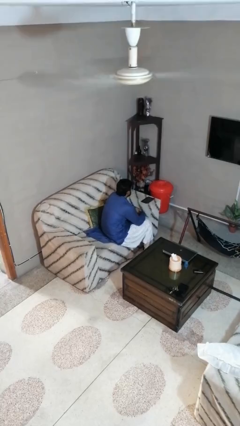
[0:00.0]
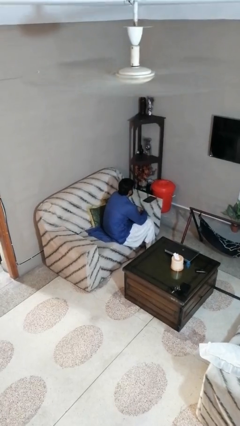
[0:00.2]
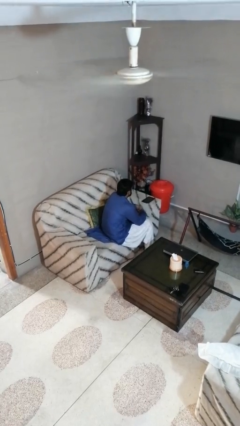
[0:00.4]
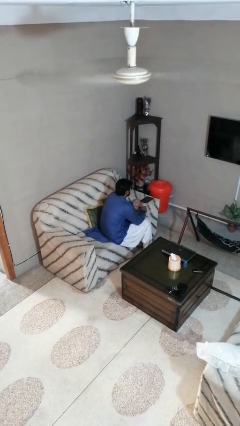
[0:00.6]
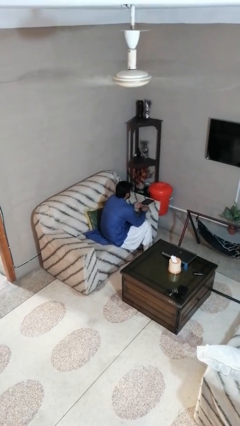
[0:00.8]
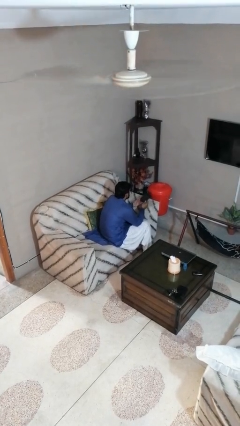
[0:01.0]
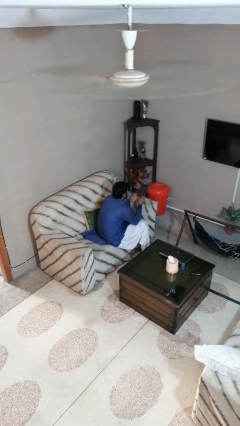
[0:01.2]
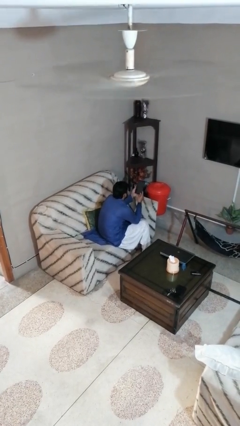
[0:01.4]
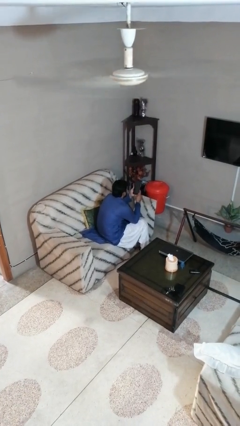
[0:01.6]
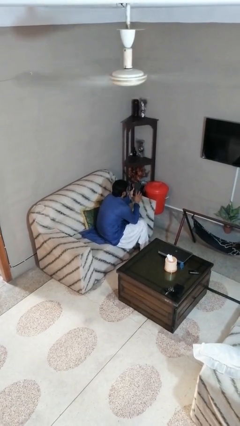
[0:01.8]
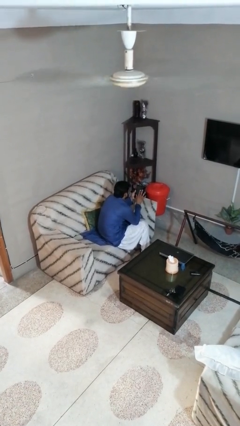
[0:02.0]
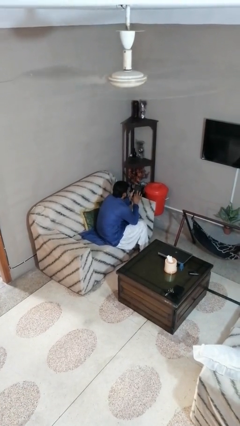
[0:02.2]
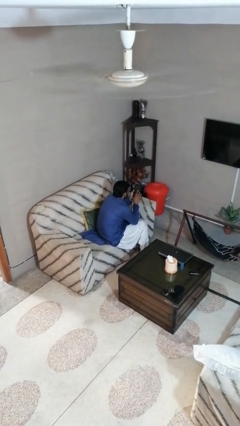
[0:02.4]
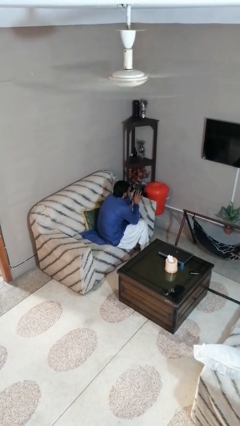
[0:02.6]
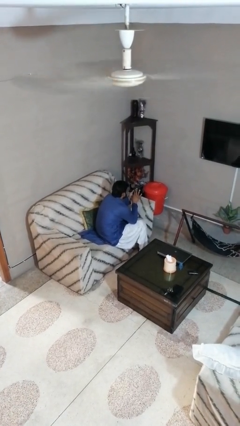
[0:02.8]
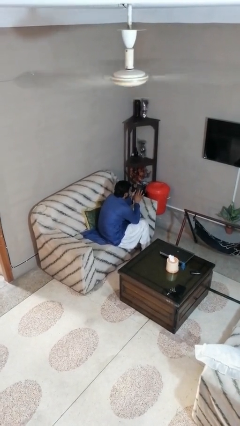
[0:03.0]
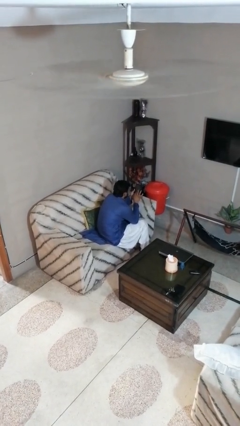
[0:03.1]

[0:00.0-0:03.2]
person interacts with tablet

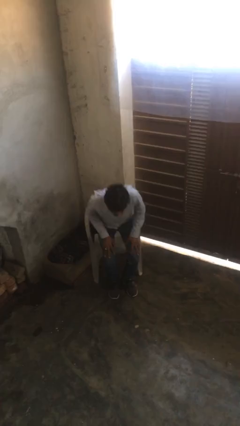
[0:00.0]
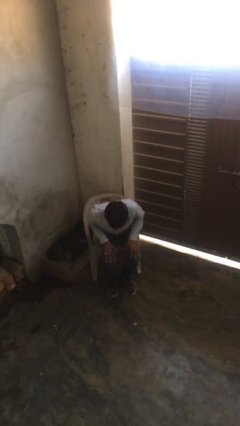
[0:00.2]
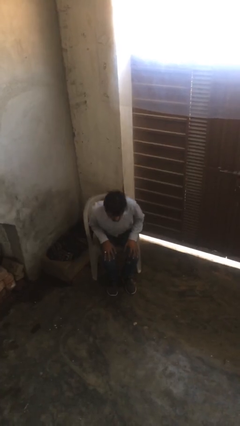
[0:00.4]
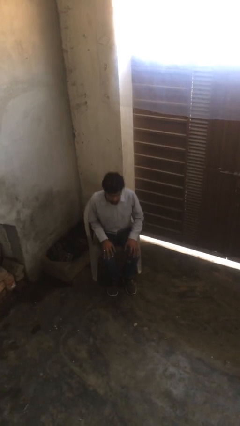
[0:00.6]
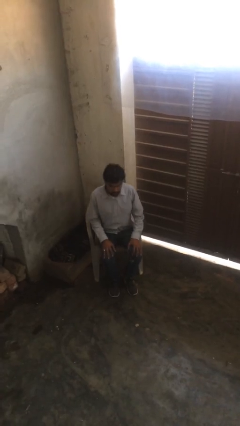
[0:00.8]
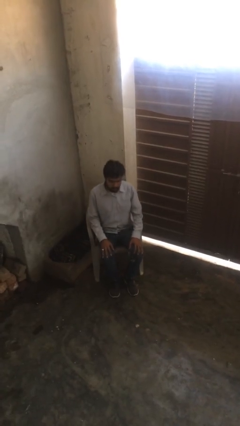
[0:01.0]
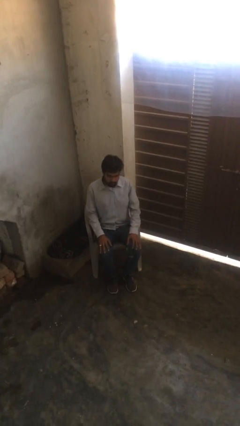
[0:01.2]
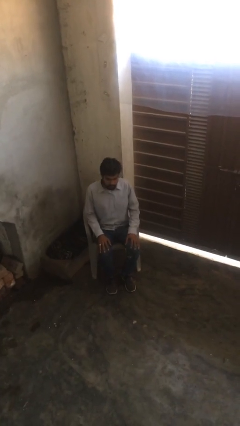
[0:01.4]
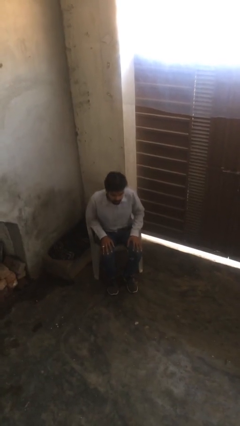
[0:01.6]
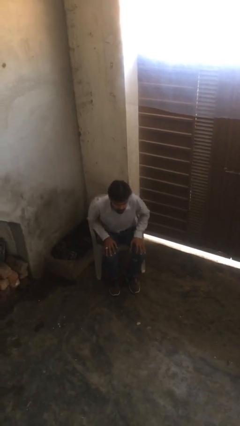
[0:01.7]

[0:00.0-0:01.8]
person sits down

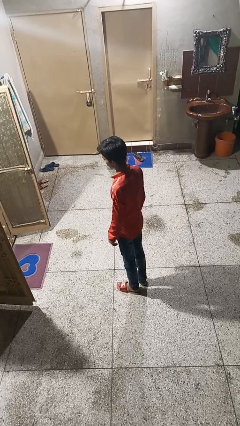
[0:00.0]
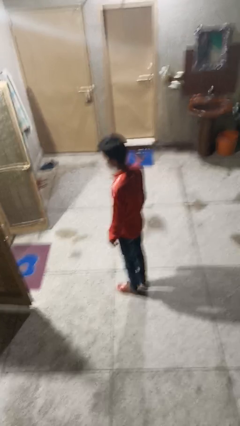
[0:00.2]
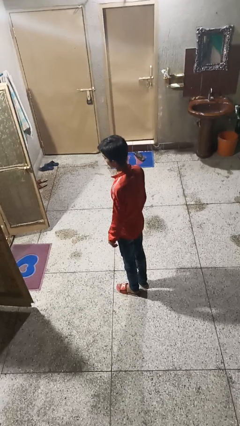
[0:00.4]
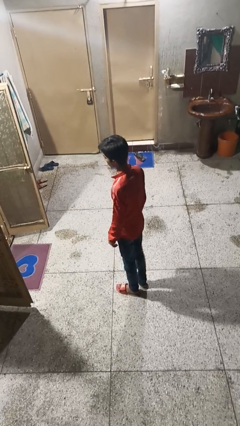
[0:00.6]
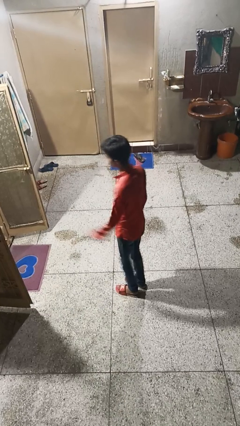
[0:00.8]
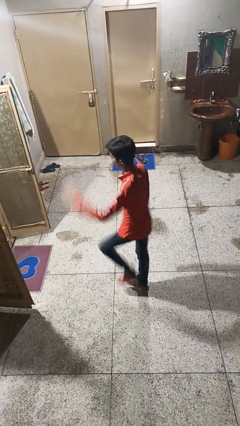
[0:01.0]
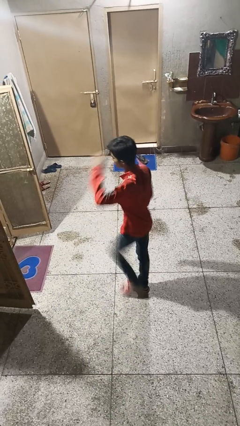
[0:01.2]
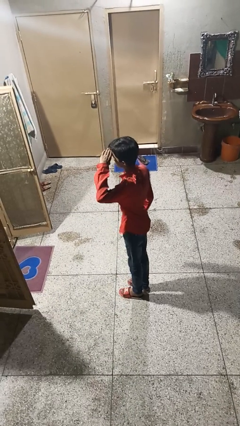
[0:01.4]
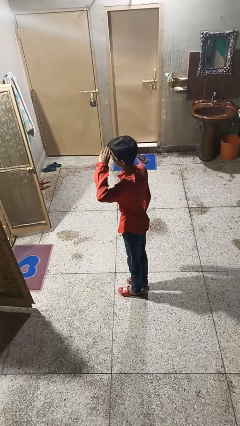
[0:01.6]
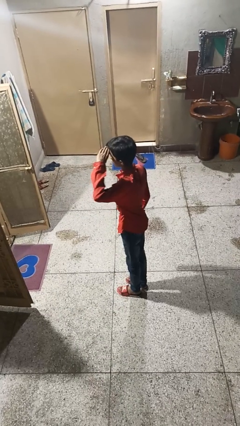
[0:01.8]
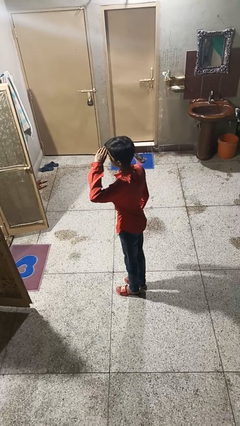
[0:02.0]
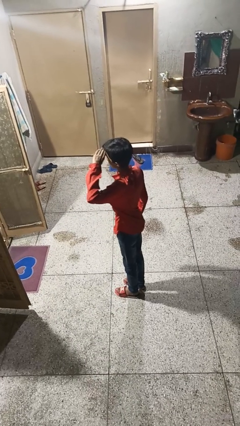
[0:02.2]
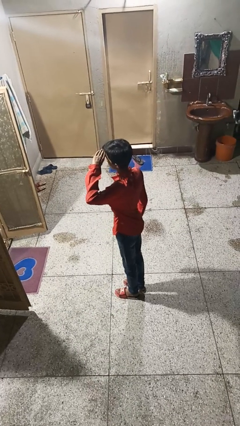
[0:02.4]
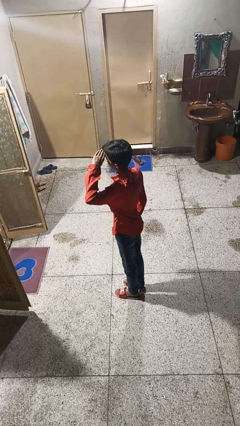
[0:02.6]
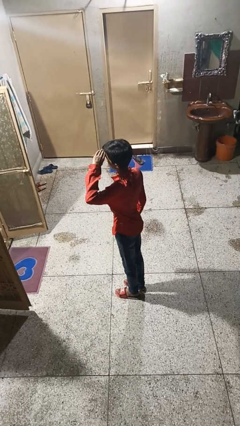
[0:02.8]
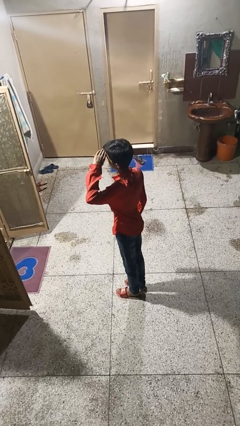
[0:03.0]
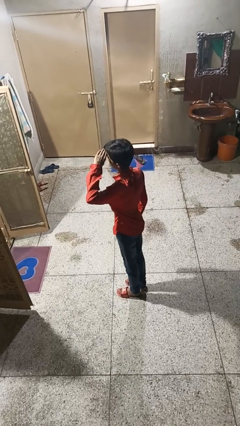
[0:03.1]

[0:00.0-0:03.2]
person salutes

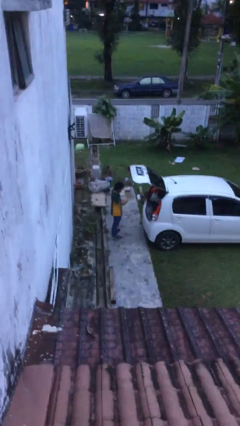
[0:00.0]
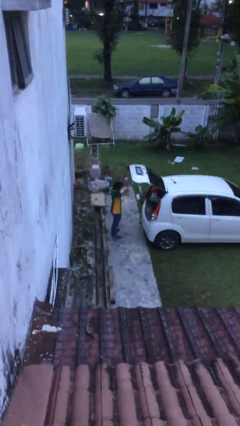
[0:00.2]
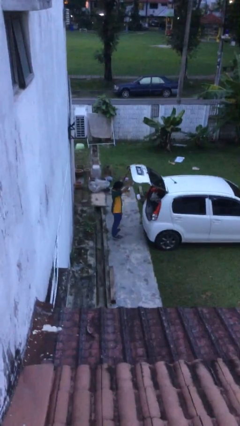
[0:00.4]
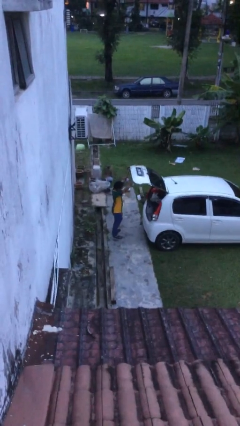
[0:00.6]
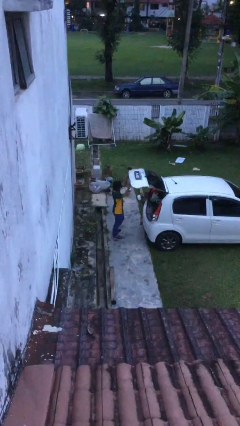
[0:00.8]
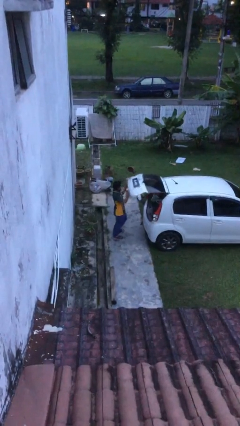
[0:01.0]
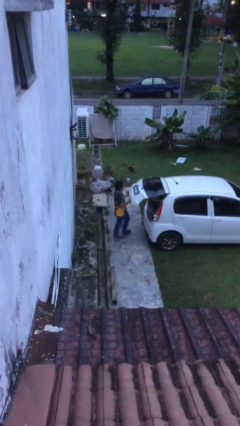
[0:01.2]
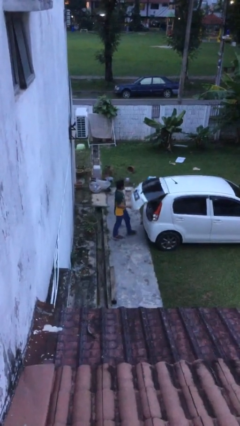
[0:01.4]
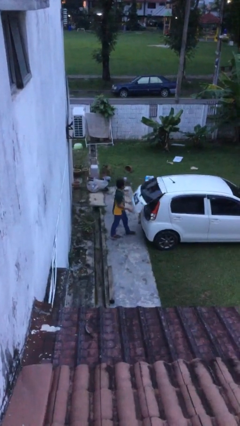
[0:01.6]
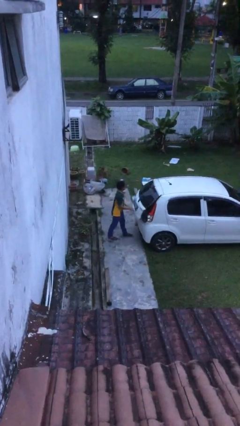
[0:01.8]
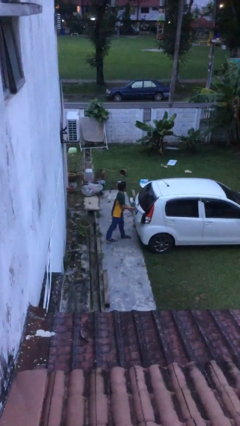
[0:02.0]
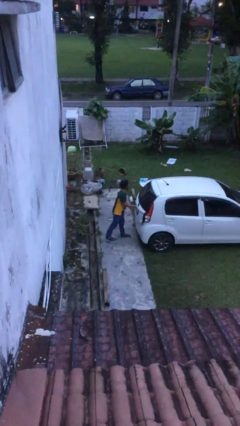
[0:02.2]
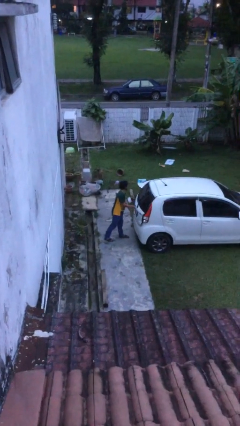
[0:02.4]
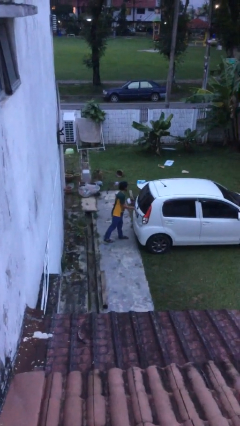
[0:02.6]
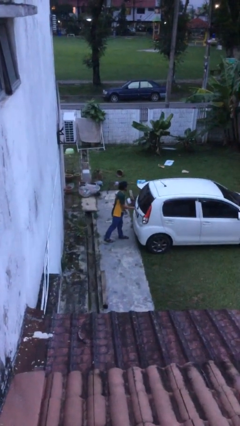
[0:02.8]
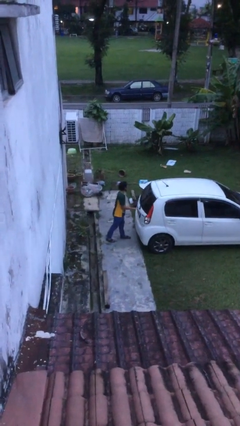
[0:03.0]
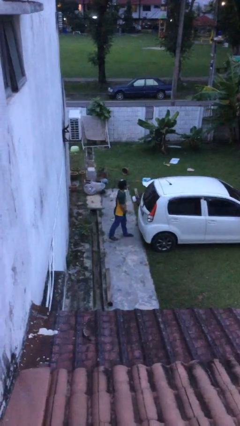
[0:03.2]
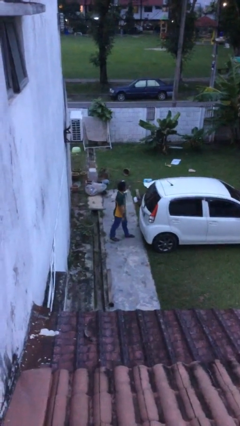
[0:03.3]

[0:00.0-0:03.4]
person closes car trunk

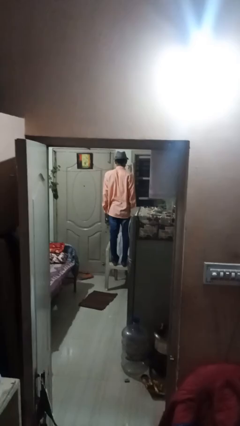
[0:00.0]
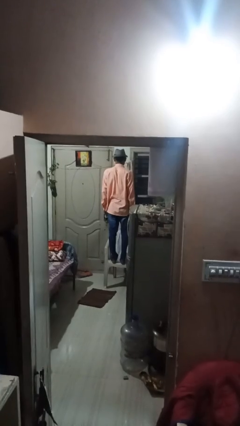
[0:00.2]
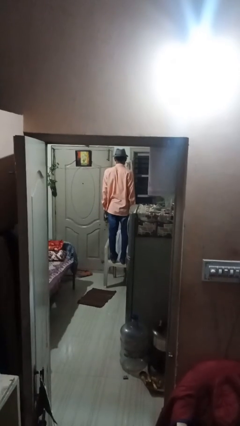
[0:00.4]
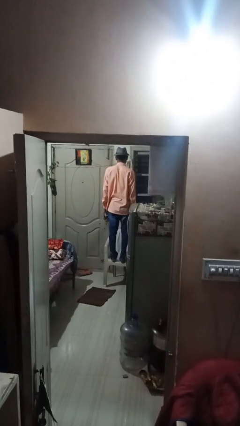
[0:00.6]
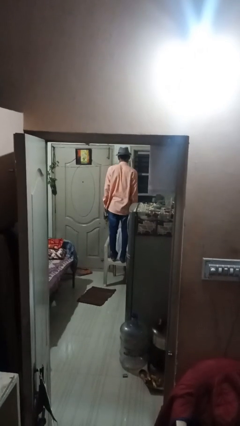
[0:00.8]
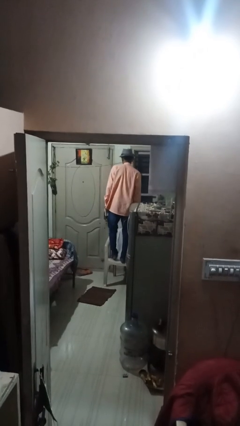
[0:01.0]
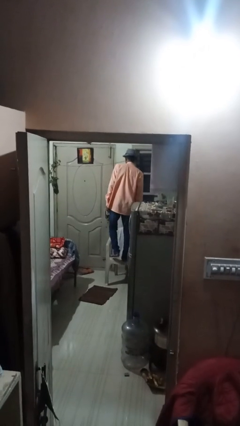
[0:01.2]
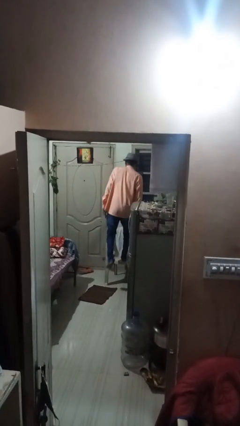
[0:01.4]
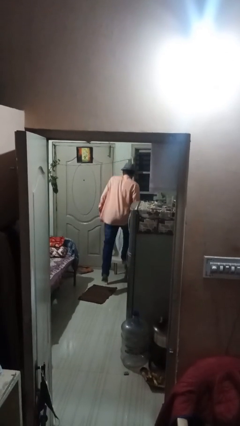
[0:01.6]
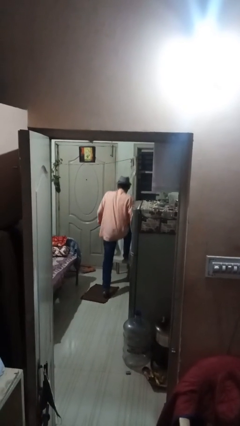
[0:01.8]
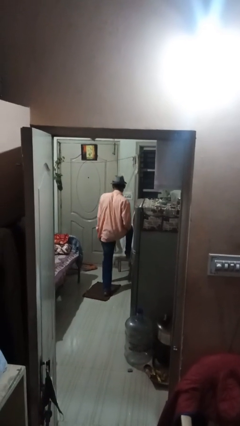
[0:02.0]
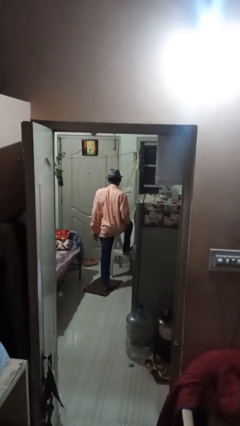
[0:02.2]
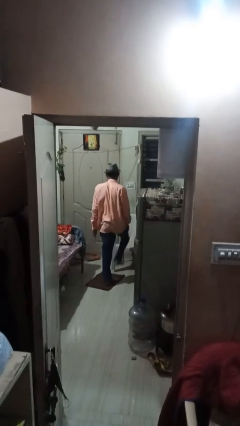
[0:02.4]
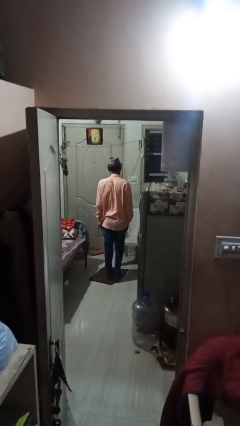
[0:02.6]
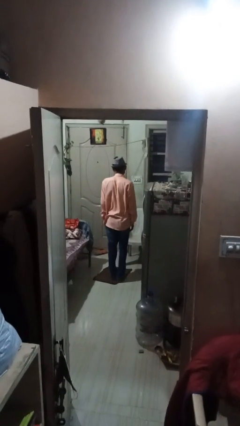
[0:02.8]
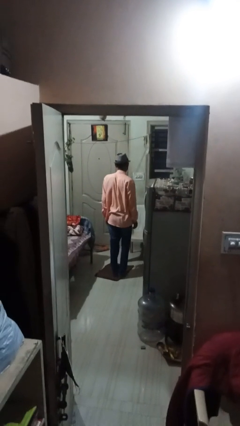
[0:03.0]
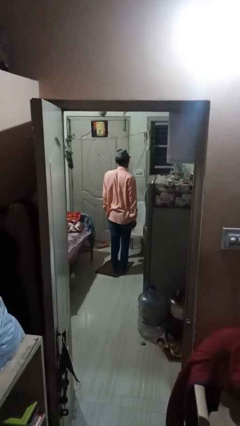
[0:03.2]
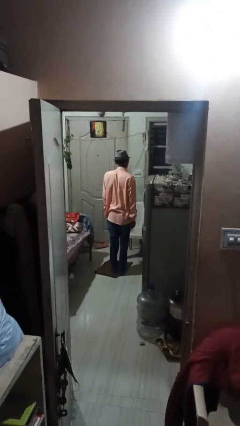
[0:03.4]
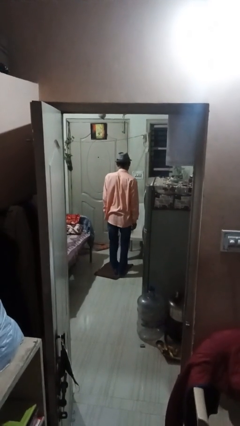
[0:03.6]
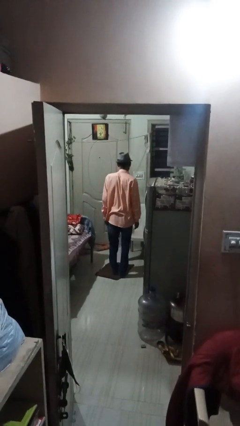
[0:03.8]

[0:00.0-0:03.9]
person climbs off chair

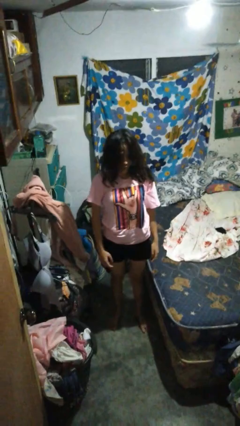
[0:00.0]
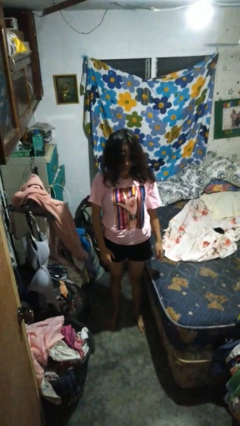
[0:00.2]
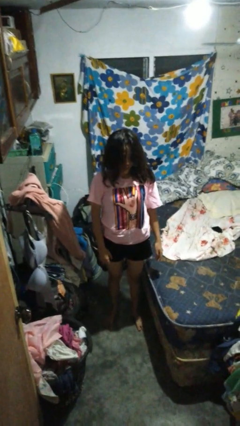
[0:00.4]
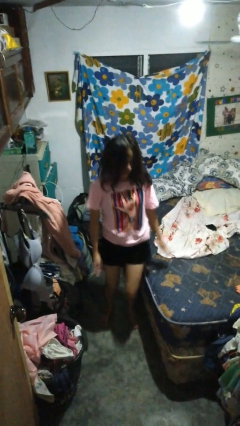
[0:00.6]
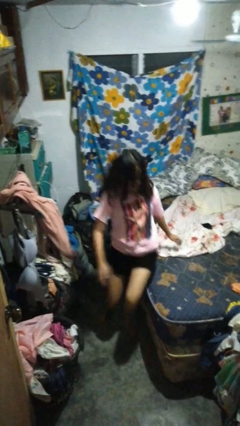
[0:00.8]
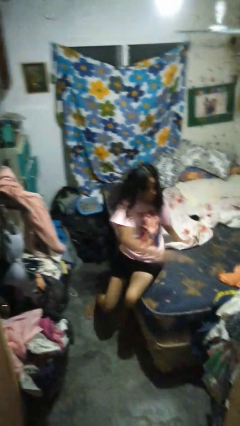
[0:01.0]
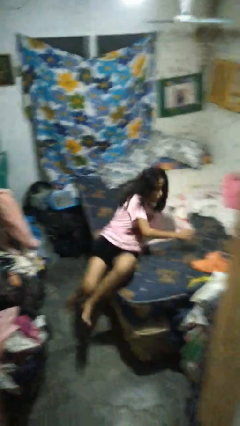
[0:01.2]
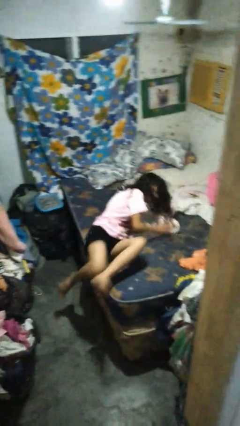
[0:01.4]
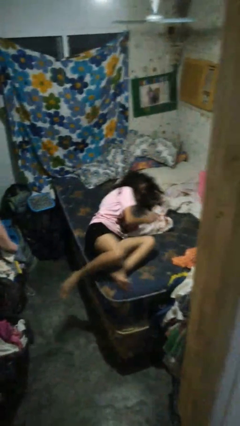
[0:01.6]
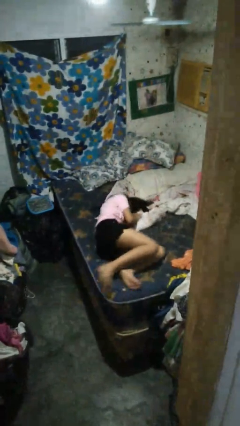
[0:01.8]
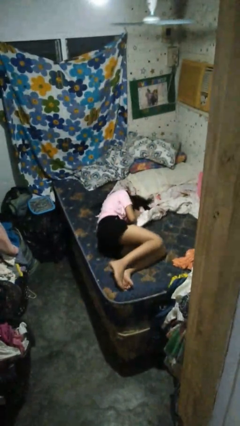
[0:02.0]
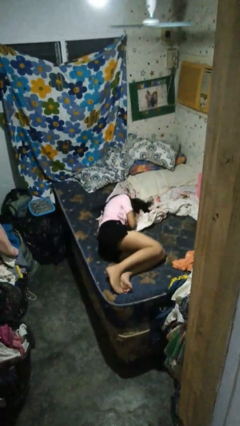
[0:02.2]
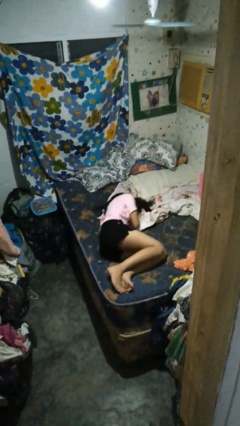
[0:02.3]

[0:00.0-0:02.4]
person lies down on bed
